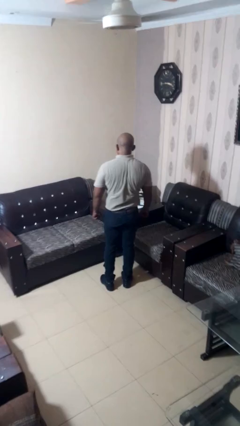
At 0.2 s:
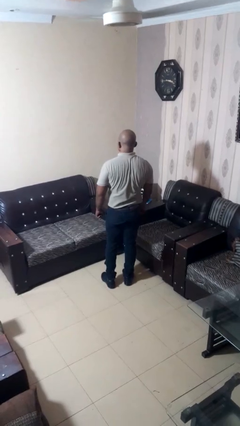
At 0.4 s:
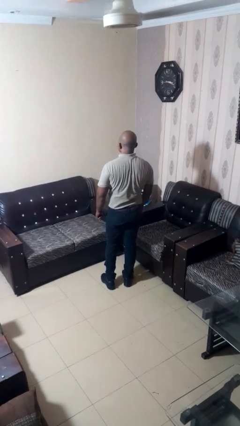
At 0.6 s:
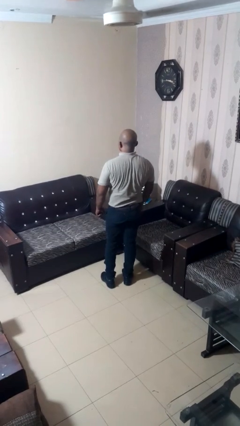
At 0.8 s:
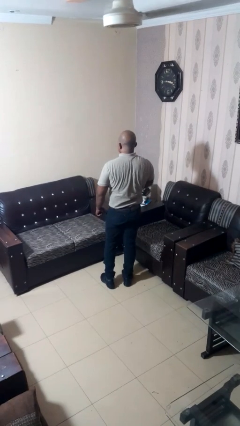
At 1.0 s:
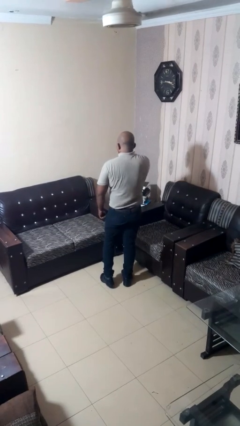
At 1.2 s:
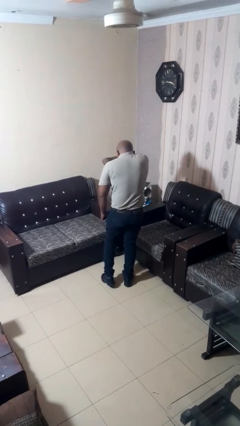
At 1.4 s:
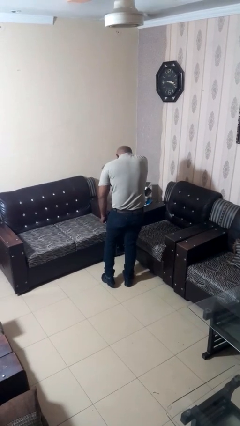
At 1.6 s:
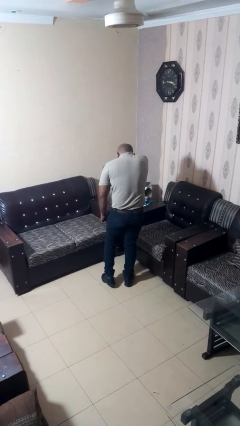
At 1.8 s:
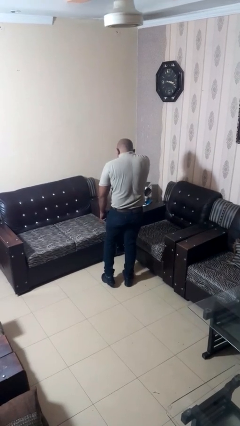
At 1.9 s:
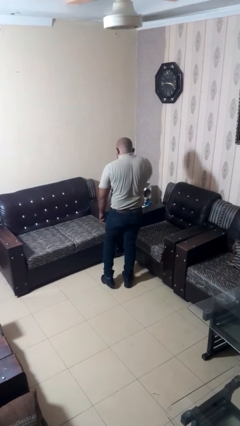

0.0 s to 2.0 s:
person sneezes into arm

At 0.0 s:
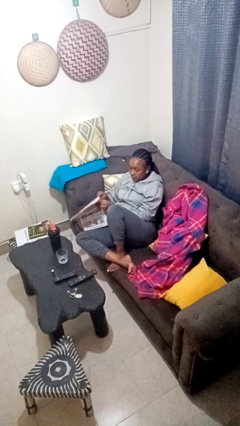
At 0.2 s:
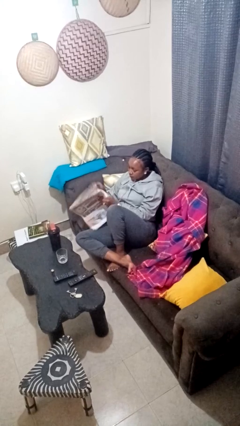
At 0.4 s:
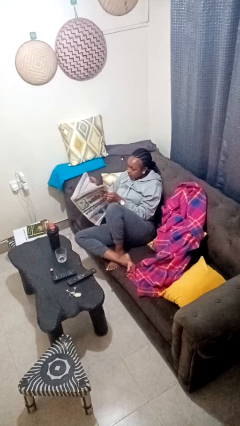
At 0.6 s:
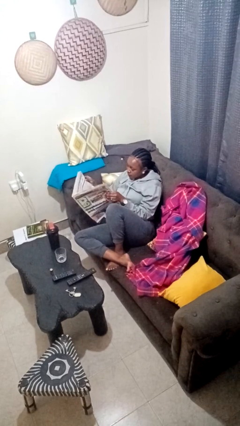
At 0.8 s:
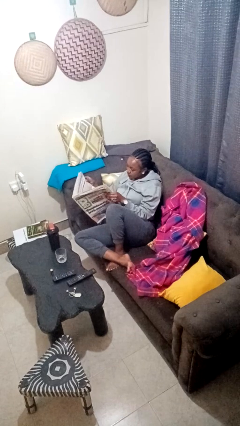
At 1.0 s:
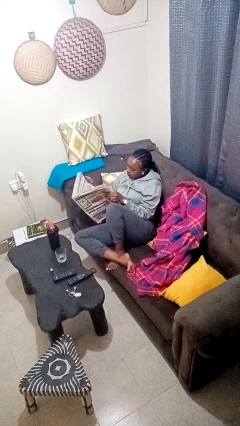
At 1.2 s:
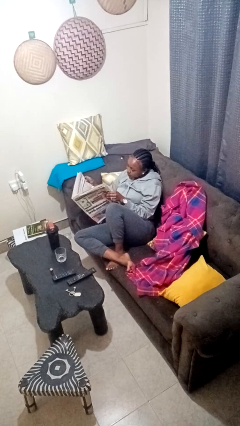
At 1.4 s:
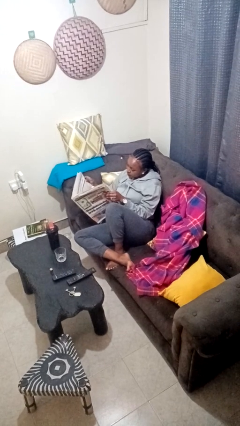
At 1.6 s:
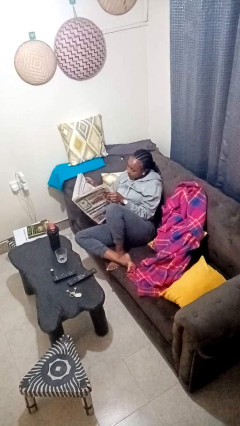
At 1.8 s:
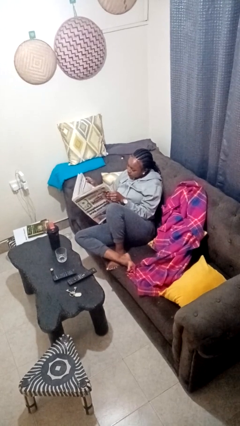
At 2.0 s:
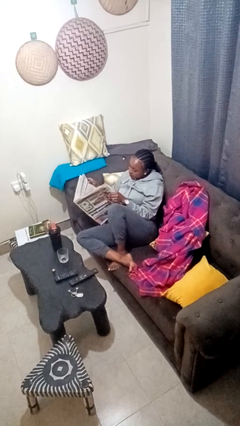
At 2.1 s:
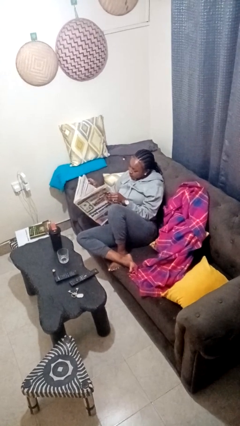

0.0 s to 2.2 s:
person reads newspaper

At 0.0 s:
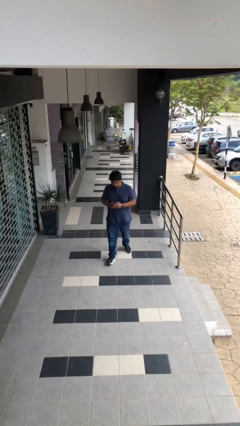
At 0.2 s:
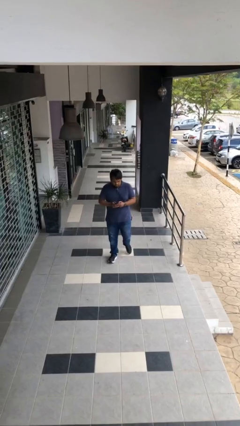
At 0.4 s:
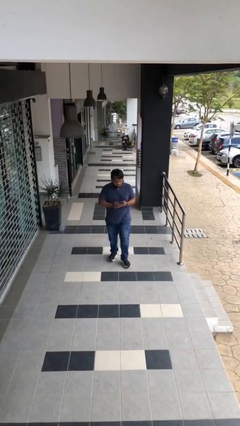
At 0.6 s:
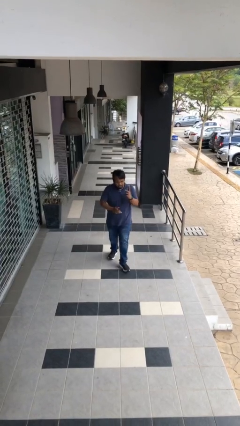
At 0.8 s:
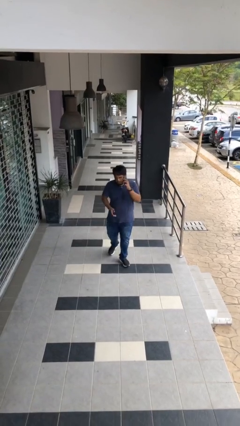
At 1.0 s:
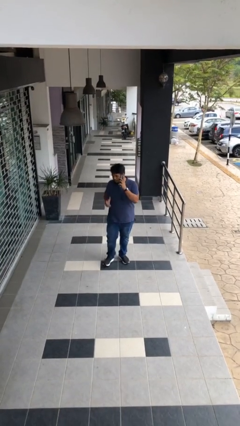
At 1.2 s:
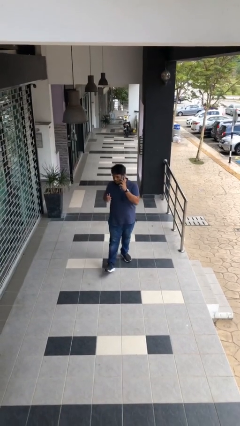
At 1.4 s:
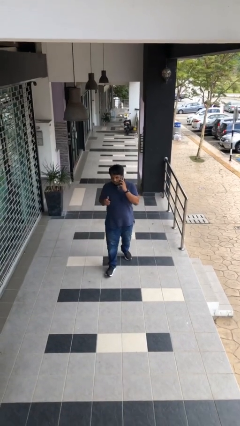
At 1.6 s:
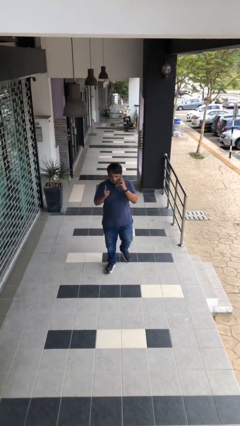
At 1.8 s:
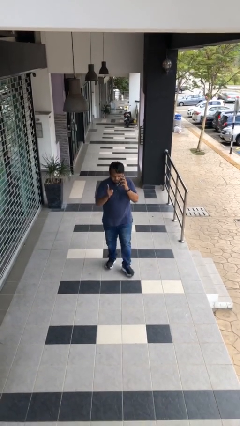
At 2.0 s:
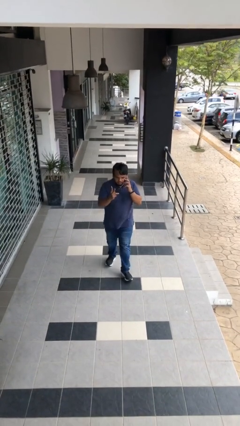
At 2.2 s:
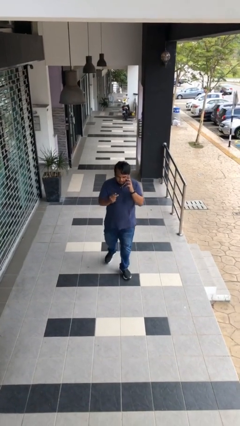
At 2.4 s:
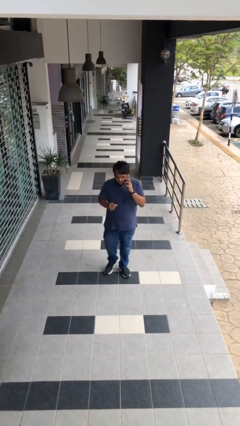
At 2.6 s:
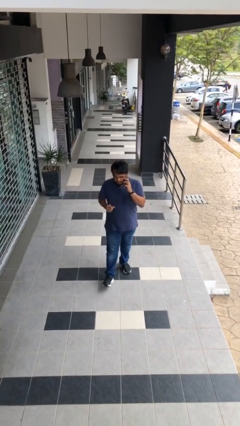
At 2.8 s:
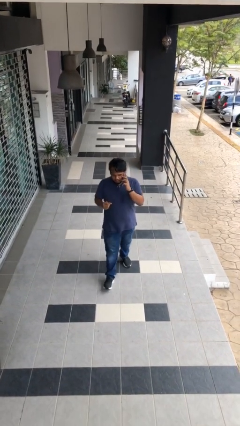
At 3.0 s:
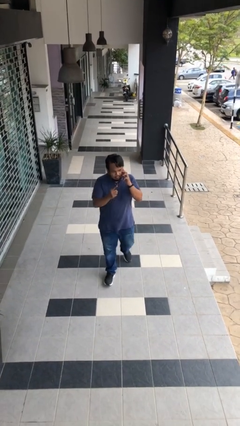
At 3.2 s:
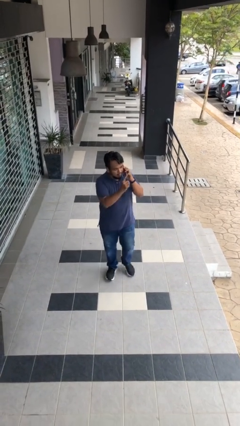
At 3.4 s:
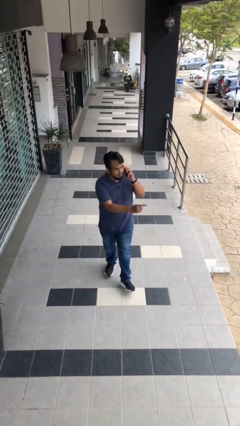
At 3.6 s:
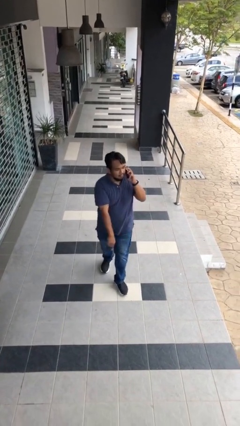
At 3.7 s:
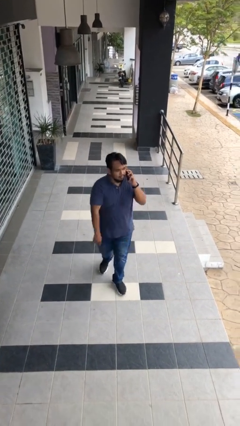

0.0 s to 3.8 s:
person talks on phone

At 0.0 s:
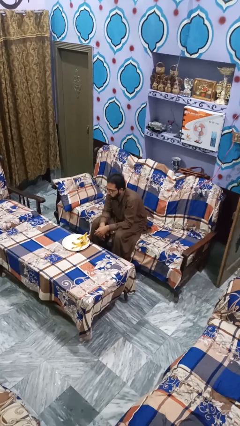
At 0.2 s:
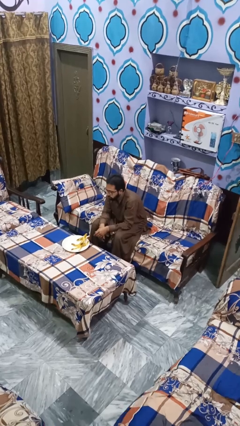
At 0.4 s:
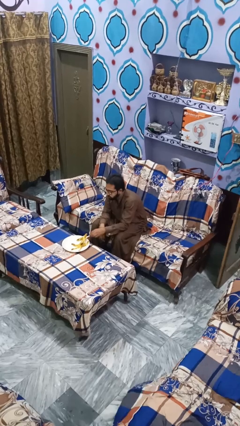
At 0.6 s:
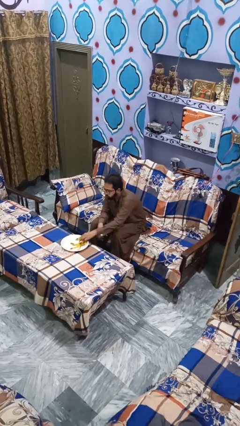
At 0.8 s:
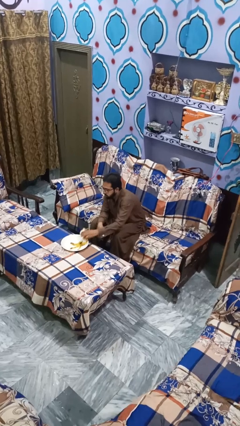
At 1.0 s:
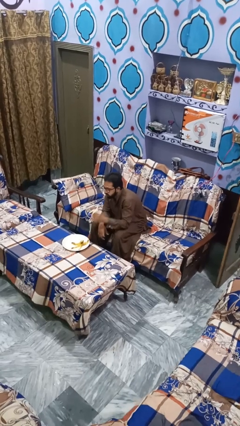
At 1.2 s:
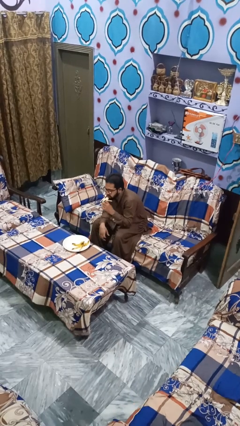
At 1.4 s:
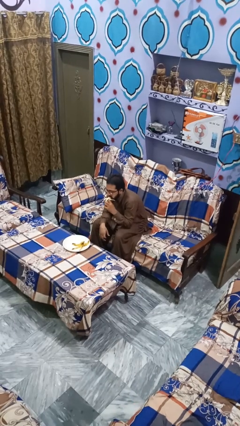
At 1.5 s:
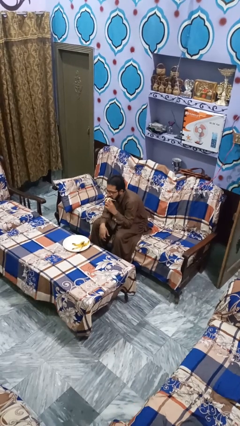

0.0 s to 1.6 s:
person eats banana

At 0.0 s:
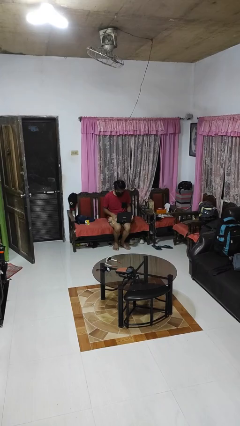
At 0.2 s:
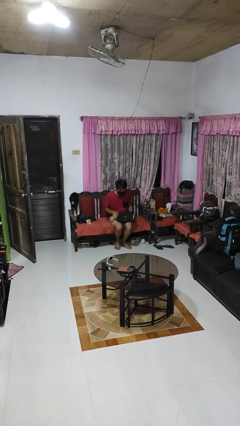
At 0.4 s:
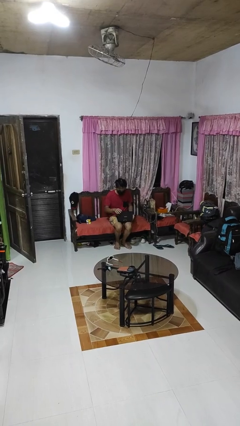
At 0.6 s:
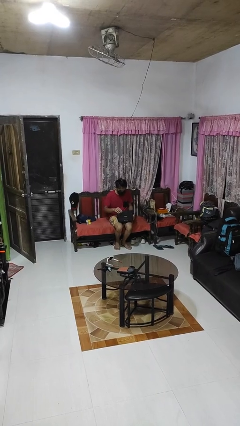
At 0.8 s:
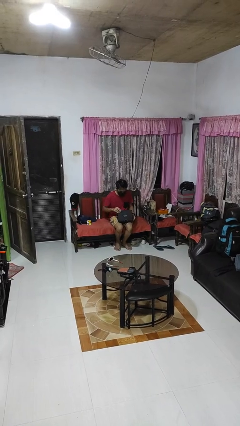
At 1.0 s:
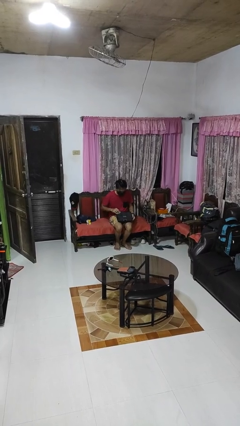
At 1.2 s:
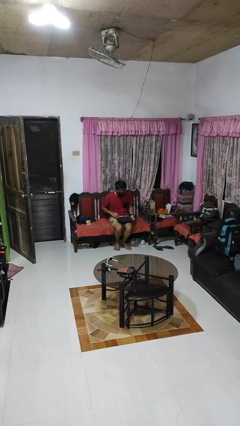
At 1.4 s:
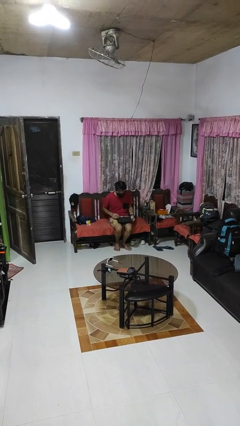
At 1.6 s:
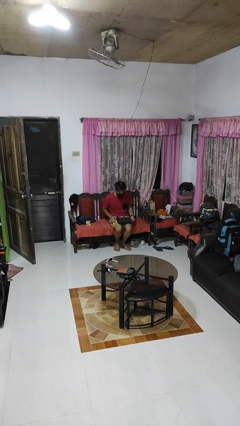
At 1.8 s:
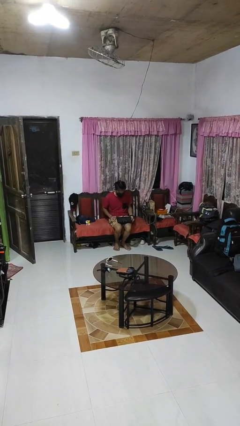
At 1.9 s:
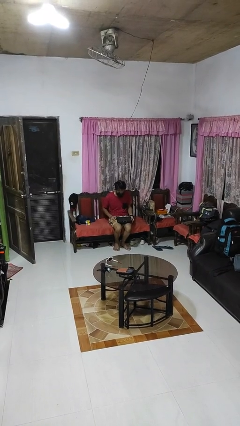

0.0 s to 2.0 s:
person closes laptop

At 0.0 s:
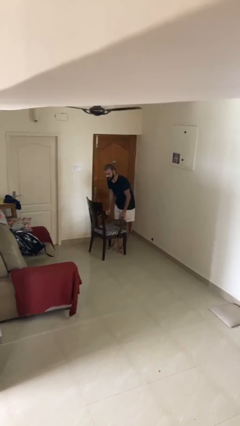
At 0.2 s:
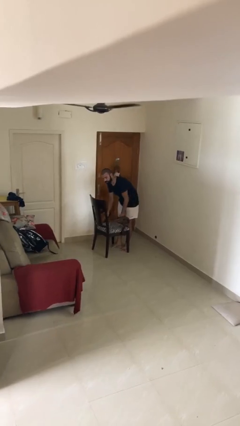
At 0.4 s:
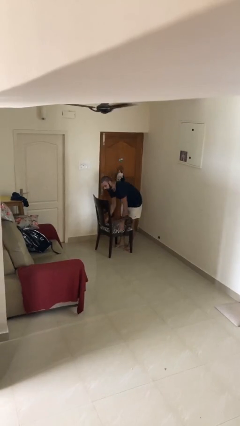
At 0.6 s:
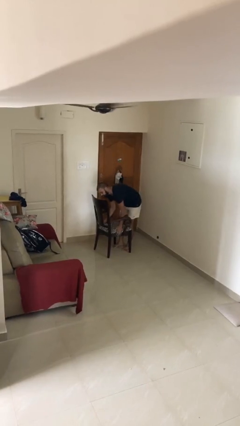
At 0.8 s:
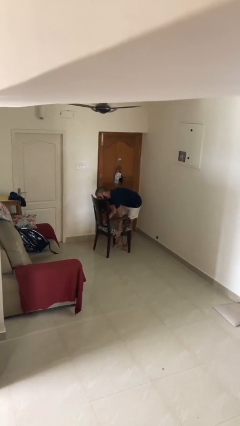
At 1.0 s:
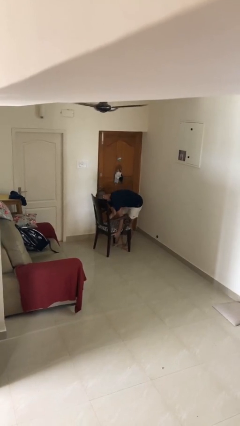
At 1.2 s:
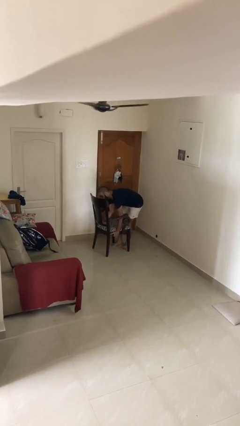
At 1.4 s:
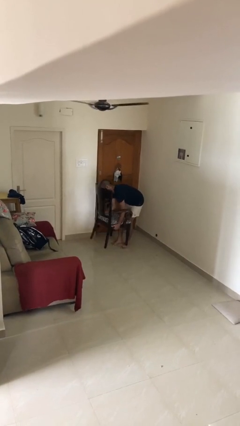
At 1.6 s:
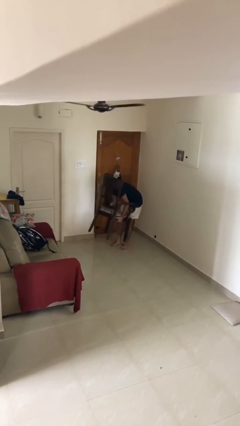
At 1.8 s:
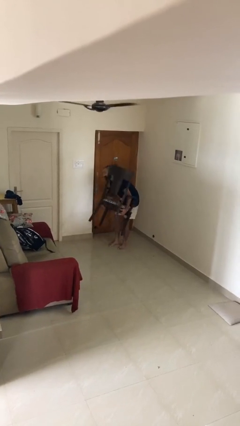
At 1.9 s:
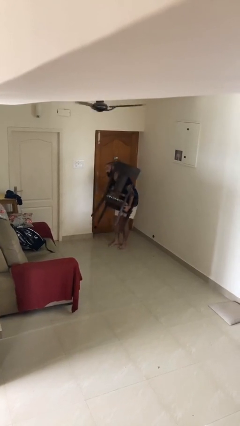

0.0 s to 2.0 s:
person picks up object from floor

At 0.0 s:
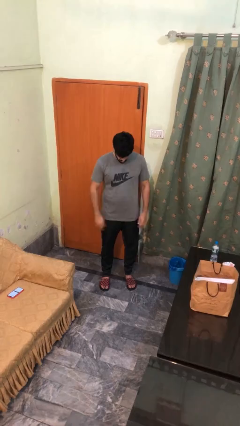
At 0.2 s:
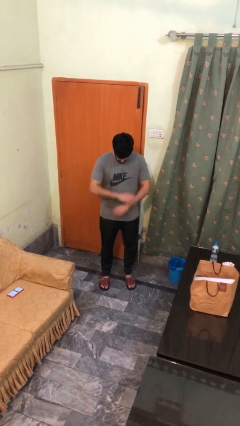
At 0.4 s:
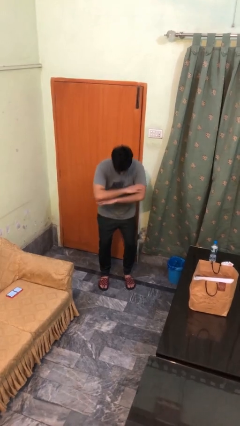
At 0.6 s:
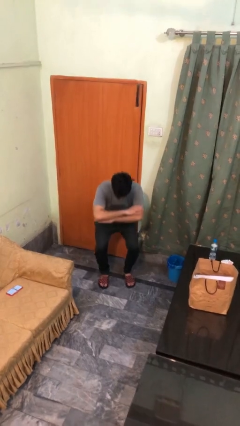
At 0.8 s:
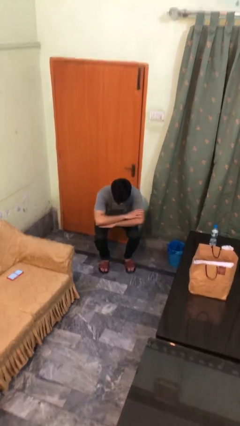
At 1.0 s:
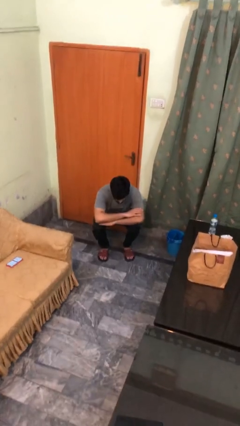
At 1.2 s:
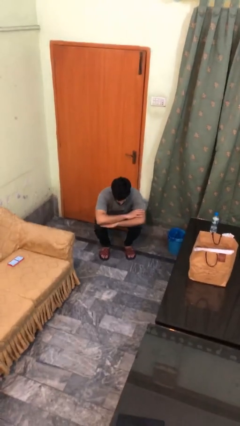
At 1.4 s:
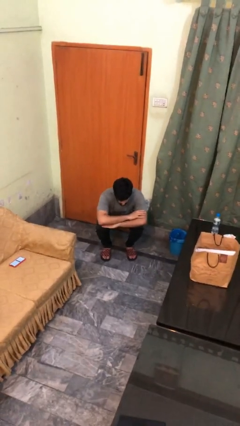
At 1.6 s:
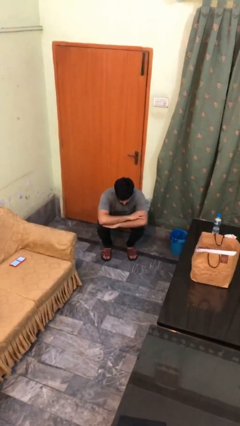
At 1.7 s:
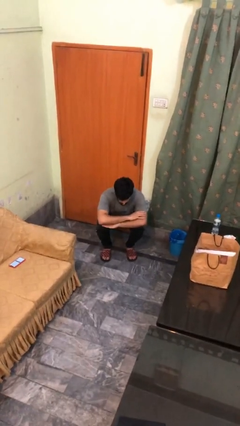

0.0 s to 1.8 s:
person squats

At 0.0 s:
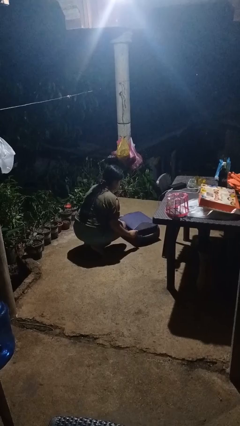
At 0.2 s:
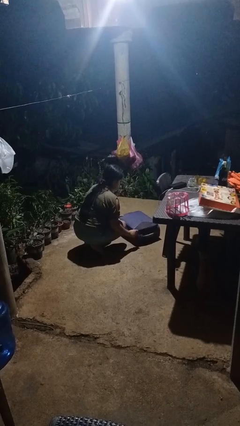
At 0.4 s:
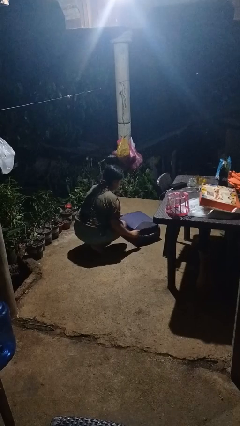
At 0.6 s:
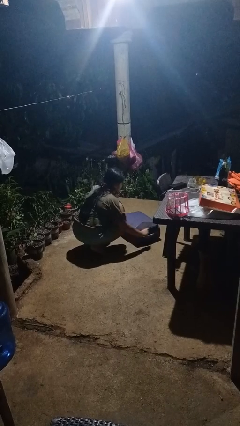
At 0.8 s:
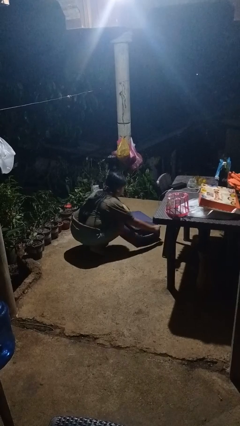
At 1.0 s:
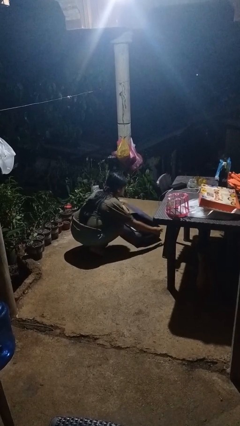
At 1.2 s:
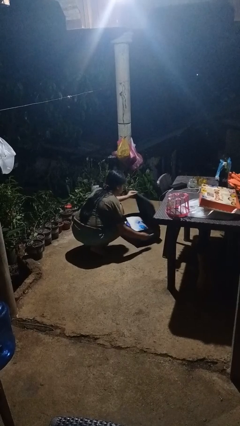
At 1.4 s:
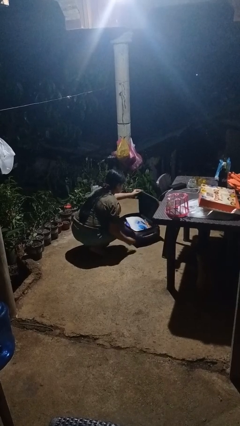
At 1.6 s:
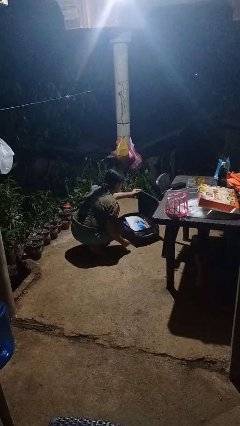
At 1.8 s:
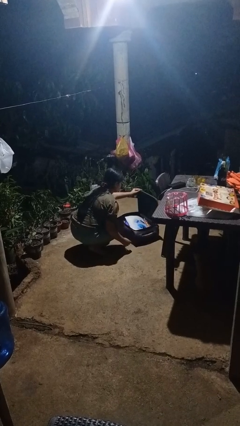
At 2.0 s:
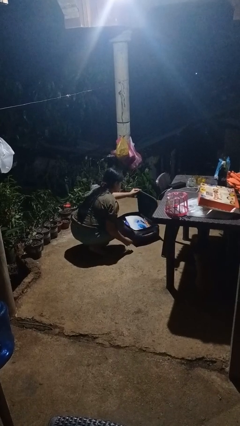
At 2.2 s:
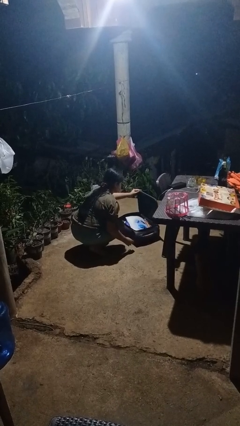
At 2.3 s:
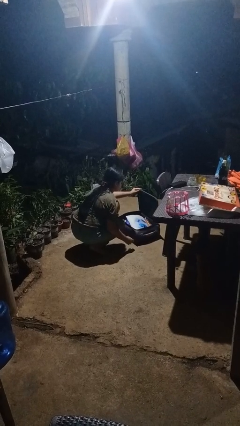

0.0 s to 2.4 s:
person opens suitcase
